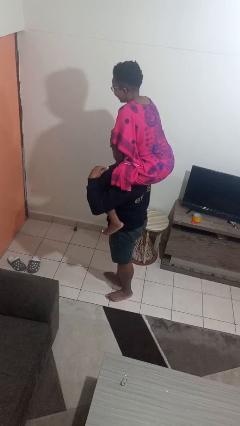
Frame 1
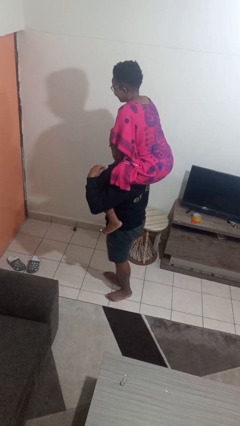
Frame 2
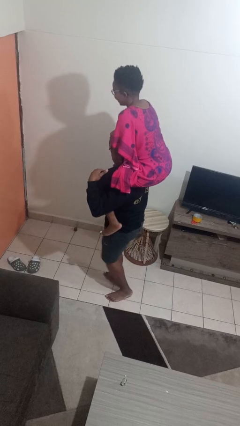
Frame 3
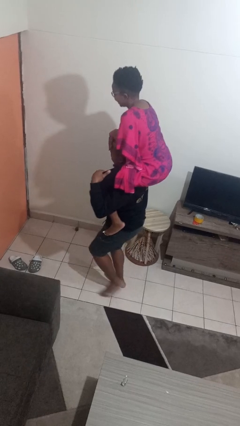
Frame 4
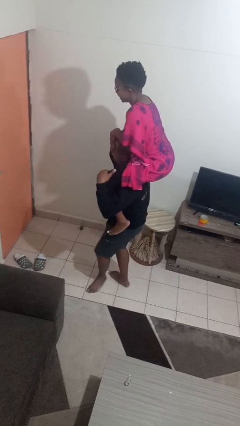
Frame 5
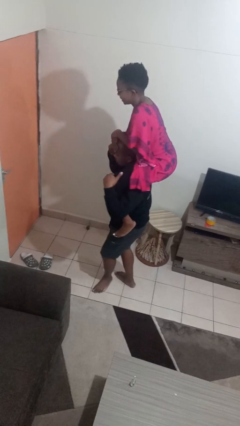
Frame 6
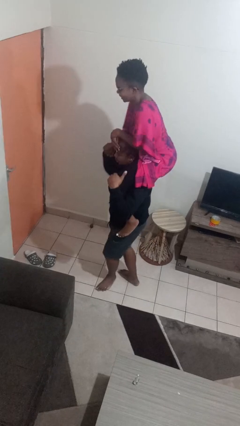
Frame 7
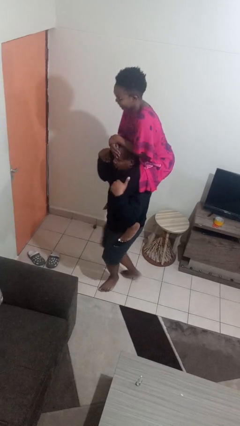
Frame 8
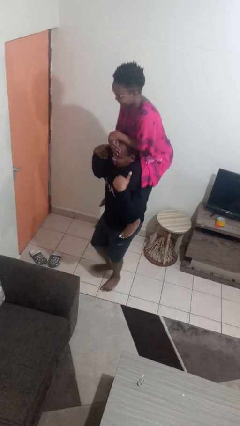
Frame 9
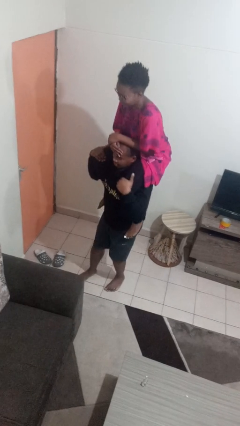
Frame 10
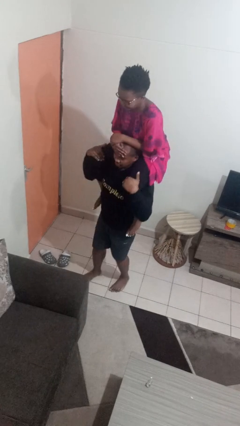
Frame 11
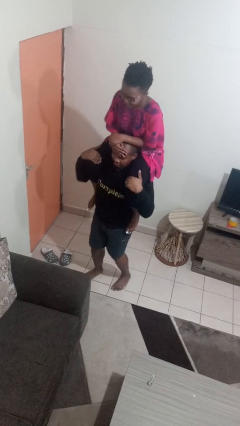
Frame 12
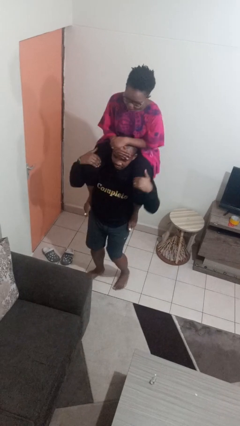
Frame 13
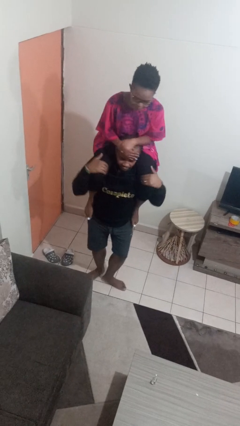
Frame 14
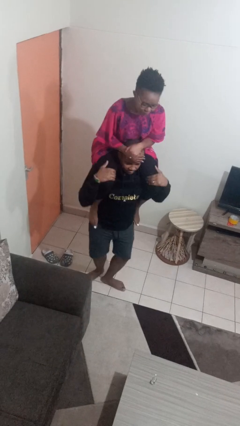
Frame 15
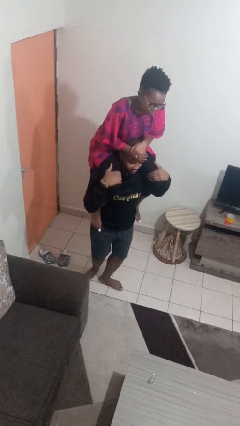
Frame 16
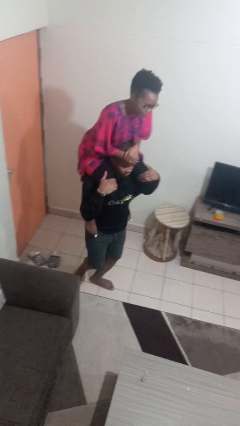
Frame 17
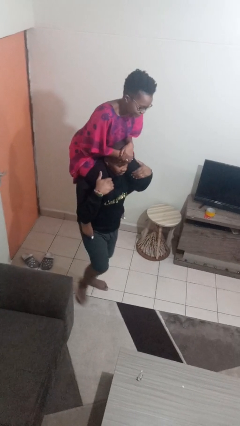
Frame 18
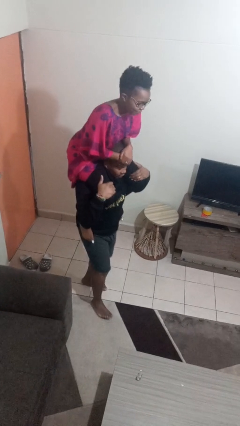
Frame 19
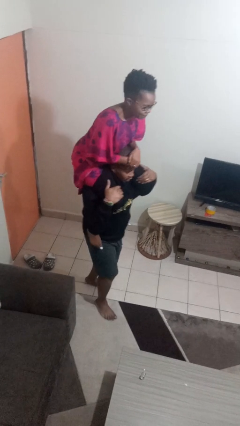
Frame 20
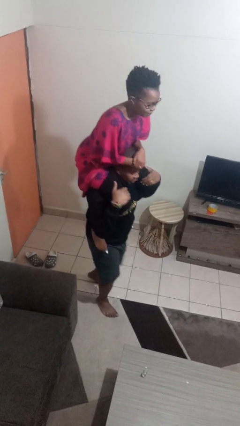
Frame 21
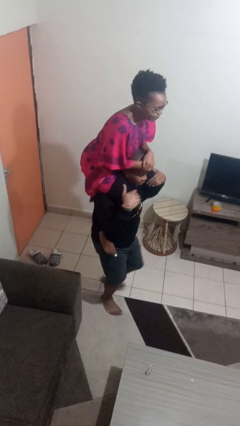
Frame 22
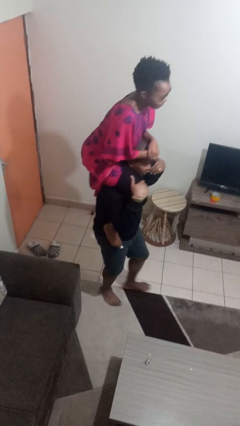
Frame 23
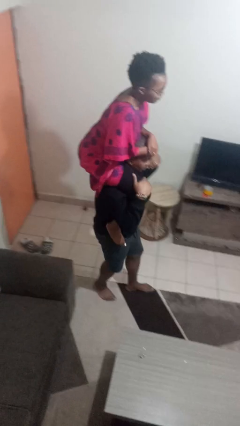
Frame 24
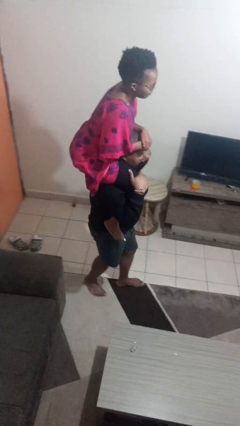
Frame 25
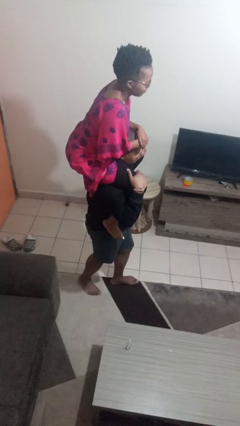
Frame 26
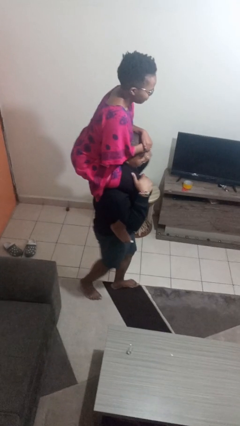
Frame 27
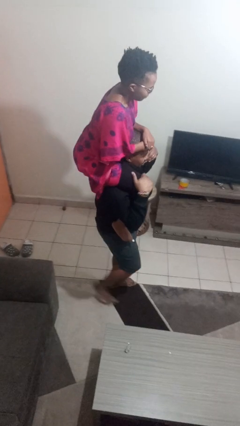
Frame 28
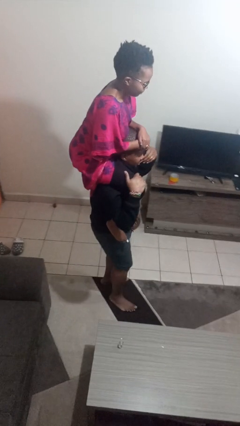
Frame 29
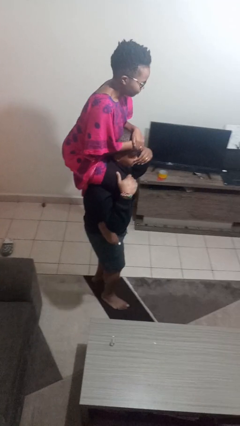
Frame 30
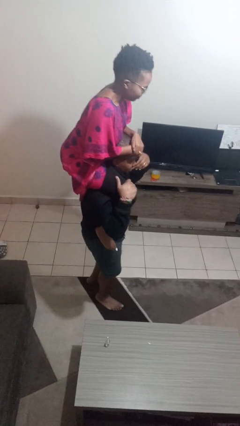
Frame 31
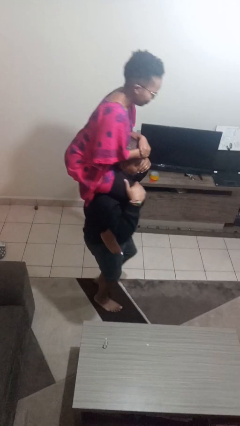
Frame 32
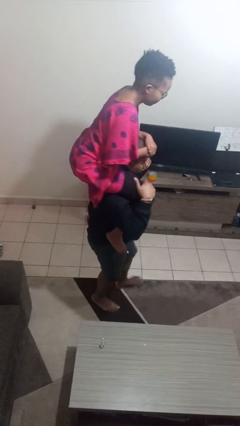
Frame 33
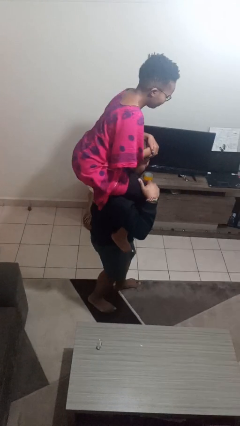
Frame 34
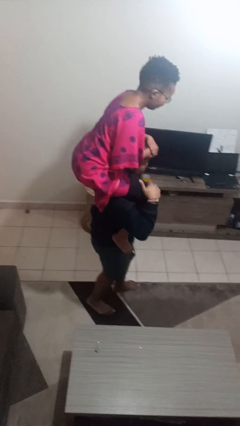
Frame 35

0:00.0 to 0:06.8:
person carries person on shoulders

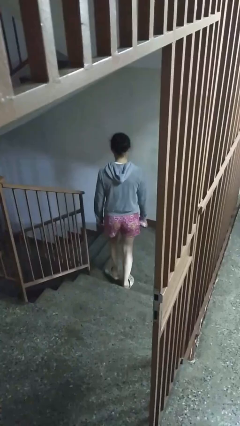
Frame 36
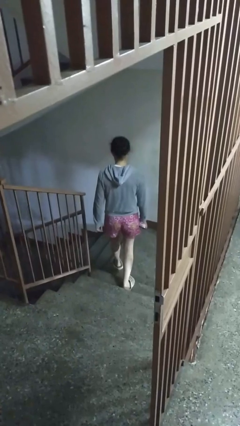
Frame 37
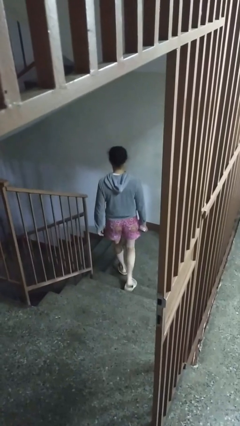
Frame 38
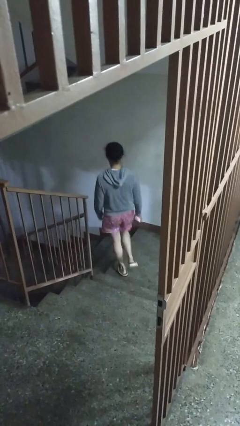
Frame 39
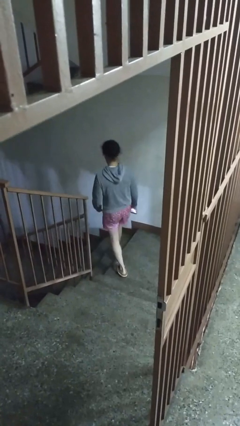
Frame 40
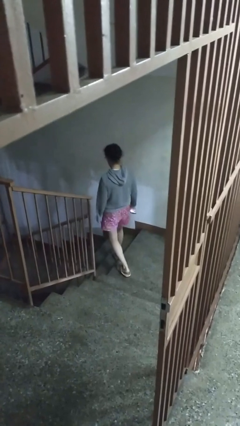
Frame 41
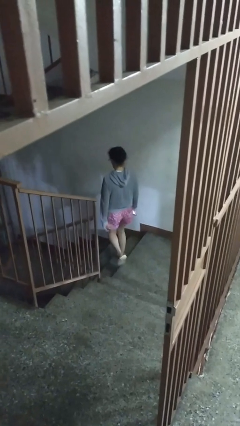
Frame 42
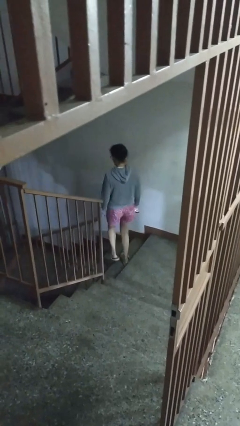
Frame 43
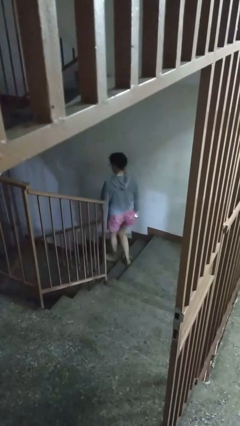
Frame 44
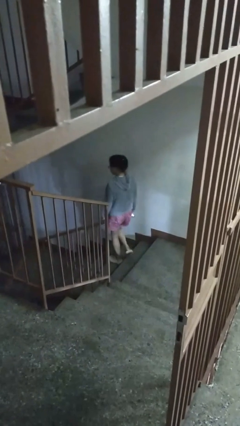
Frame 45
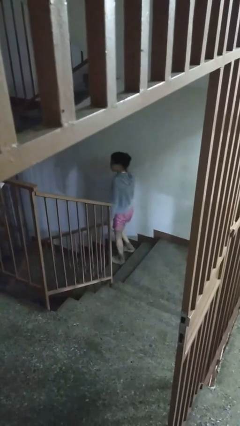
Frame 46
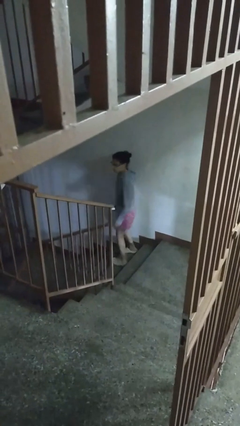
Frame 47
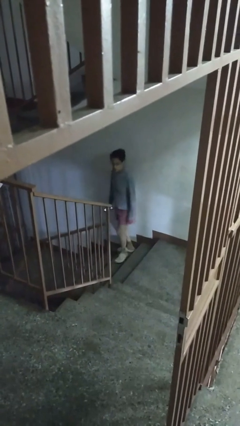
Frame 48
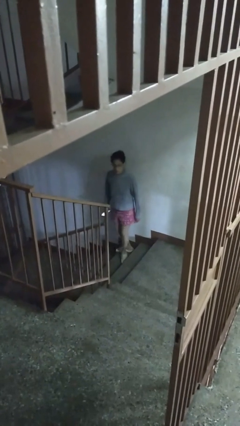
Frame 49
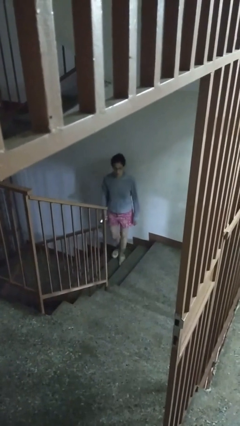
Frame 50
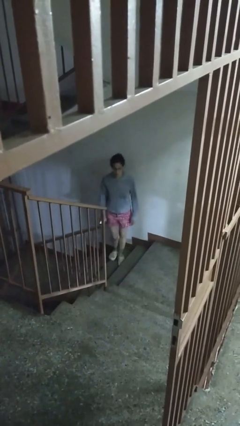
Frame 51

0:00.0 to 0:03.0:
person climbs down stairs

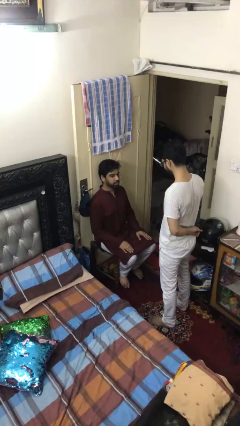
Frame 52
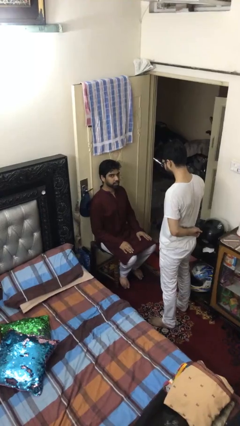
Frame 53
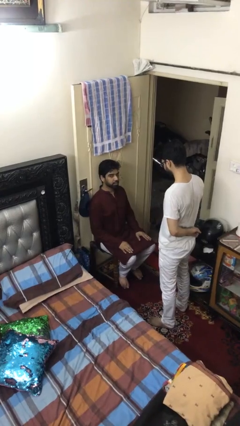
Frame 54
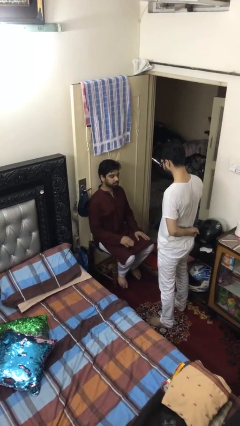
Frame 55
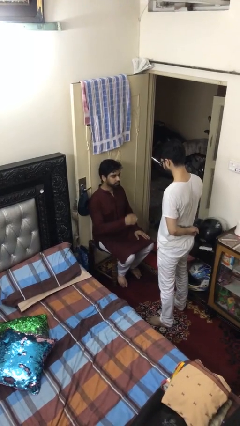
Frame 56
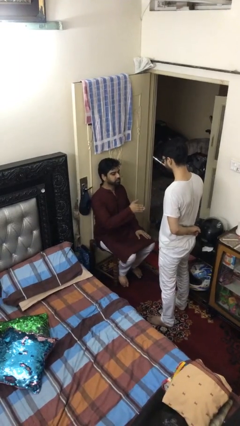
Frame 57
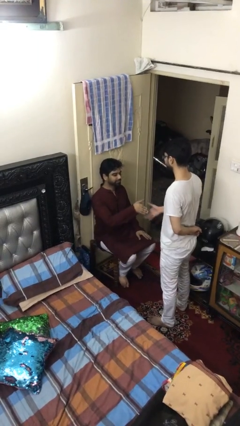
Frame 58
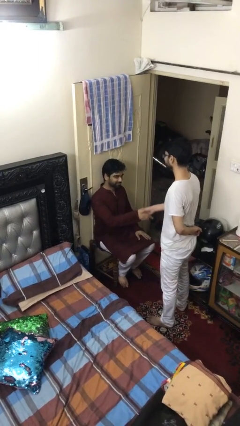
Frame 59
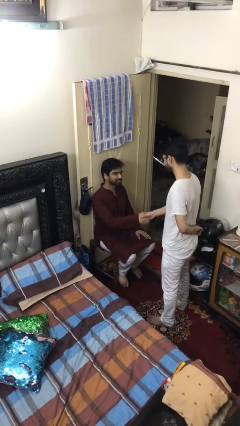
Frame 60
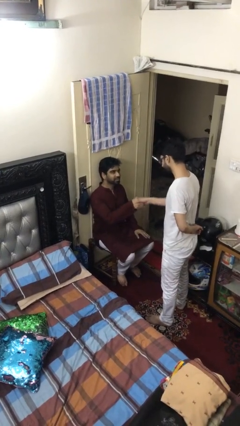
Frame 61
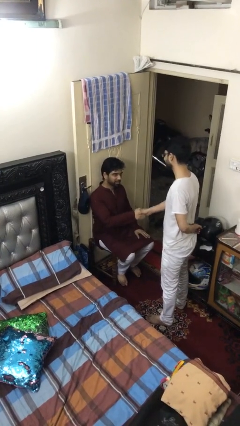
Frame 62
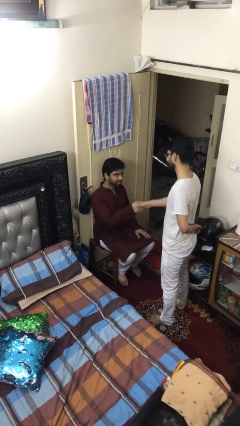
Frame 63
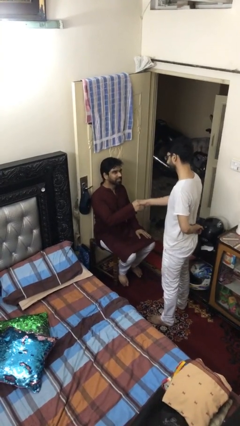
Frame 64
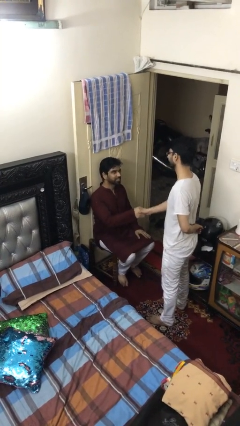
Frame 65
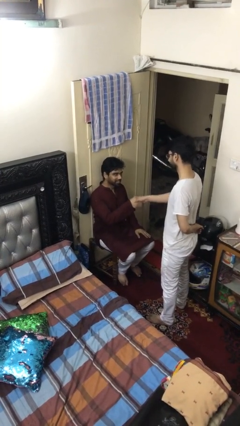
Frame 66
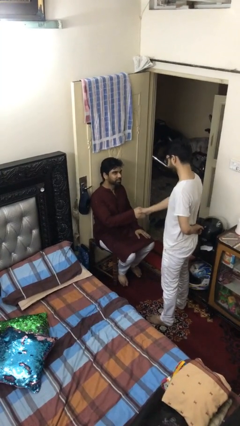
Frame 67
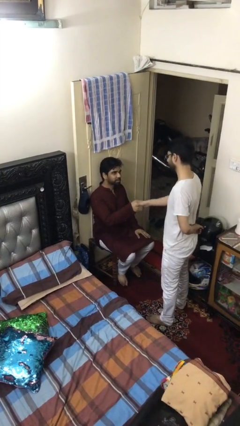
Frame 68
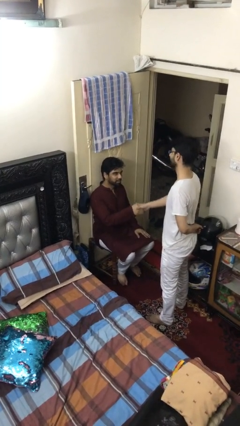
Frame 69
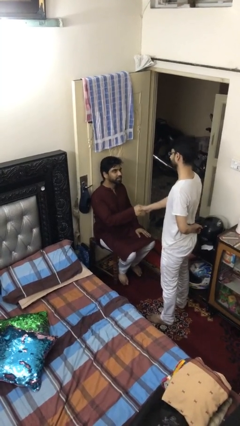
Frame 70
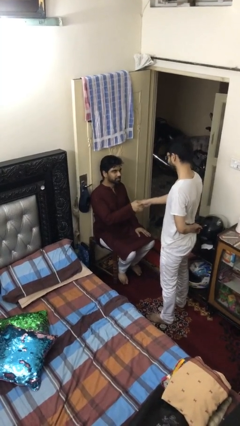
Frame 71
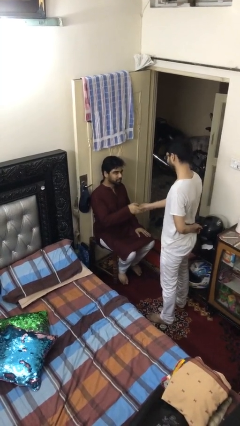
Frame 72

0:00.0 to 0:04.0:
person shakes hand

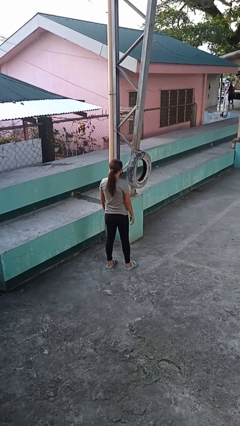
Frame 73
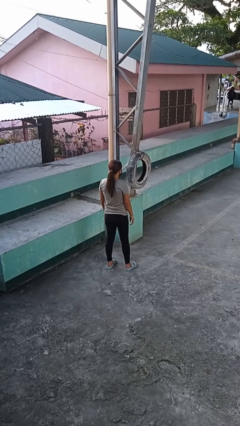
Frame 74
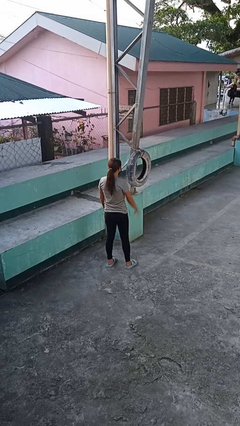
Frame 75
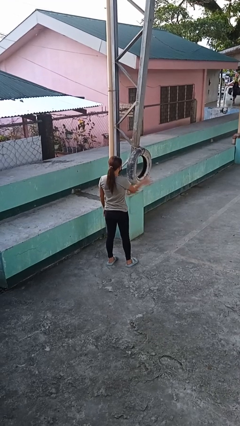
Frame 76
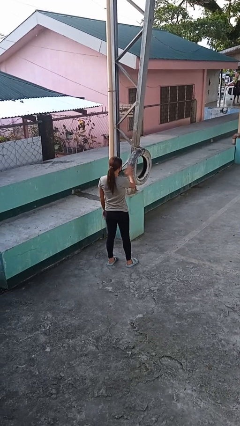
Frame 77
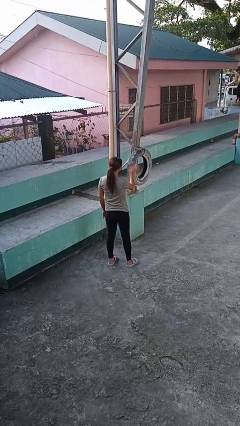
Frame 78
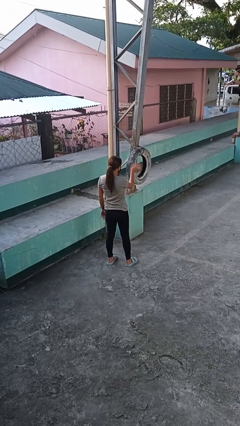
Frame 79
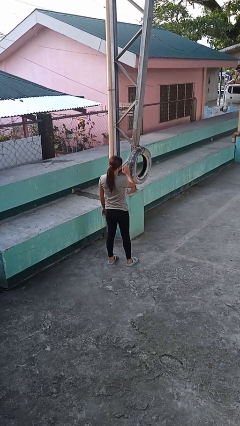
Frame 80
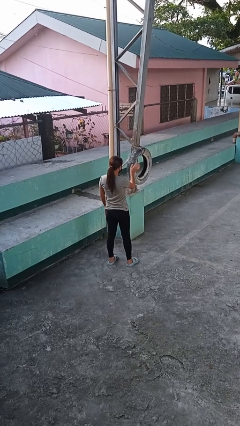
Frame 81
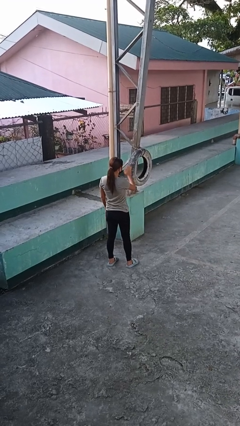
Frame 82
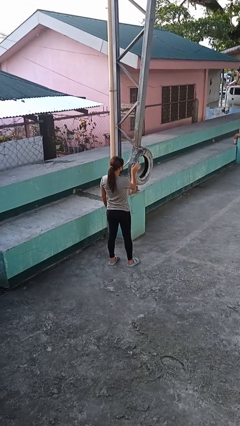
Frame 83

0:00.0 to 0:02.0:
person waves hand over object

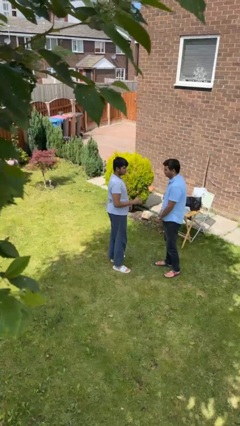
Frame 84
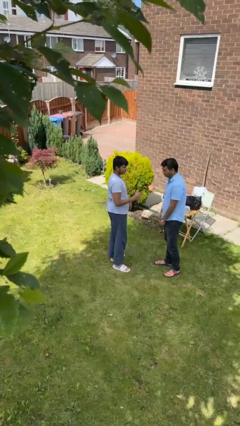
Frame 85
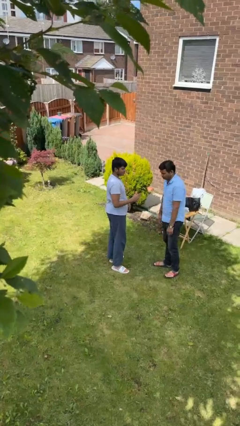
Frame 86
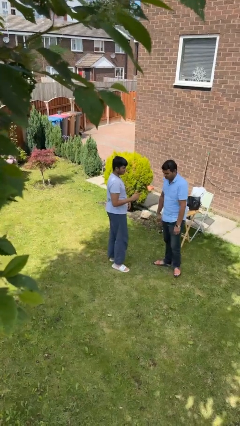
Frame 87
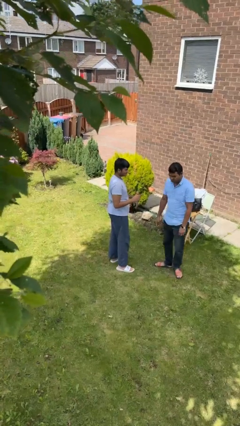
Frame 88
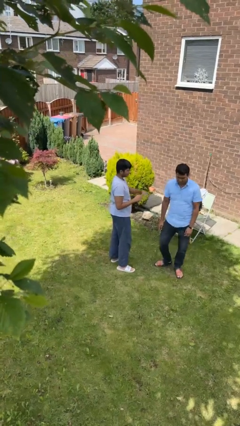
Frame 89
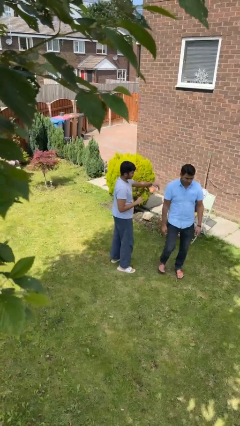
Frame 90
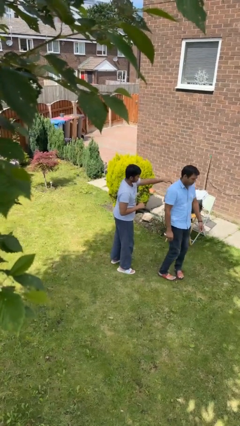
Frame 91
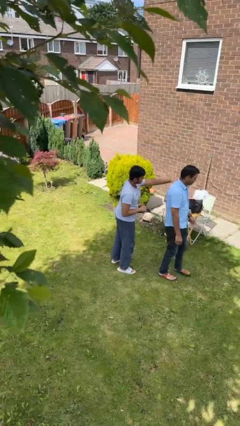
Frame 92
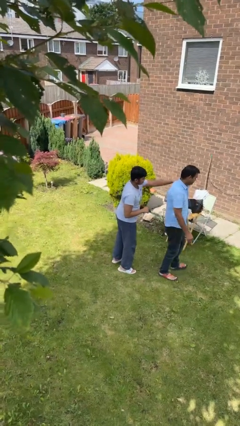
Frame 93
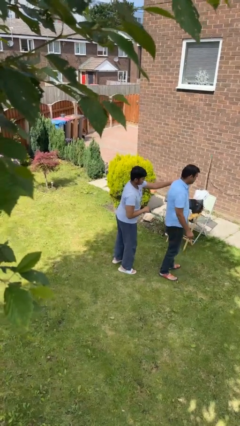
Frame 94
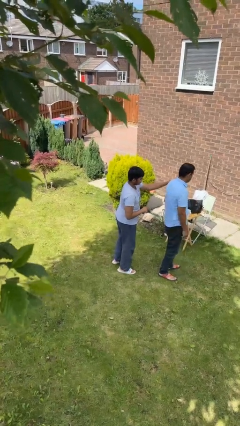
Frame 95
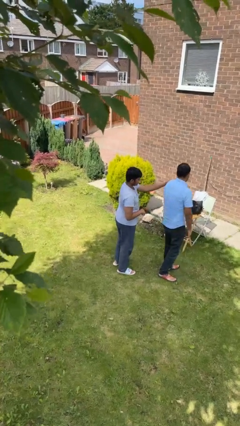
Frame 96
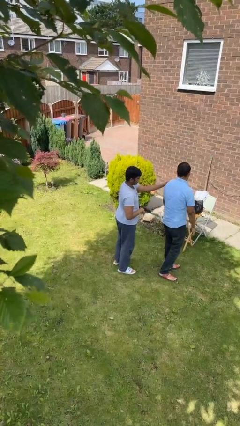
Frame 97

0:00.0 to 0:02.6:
person grabs person by shoulder
